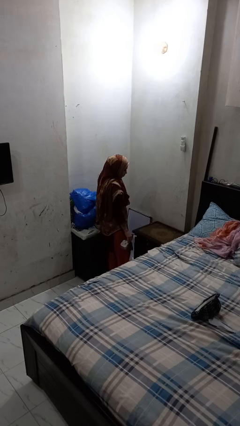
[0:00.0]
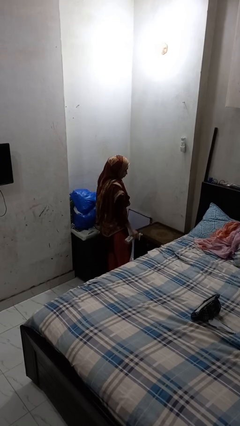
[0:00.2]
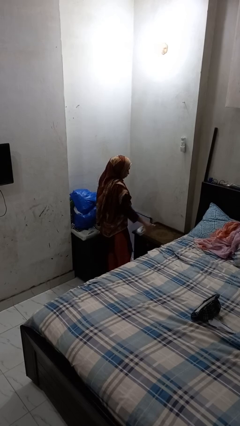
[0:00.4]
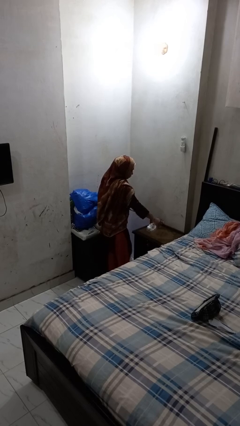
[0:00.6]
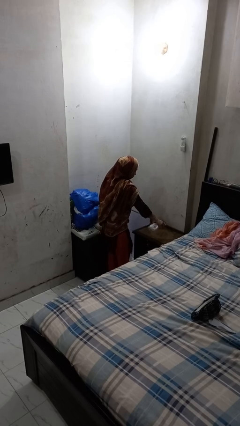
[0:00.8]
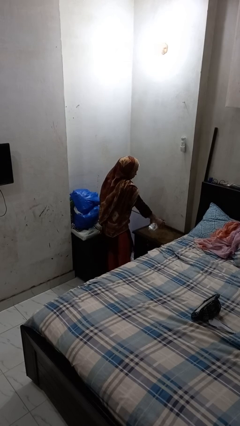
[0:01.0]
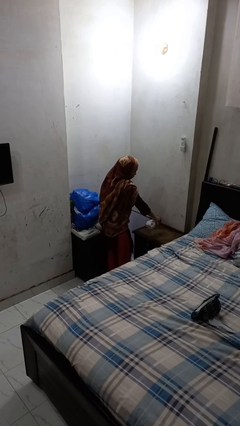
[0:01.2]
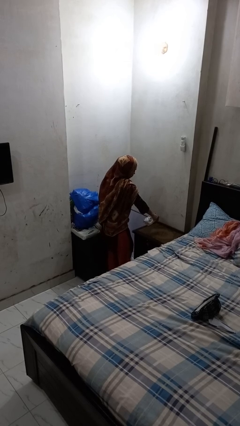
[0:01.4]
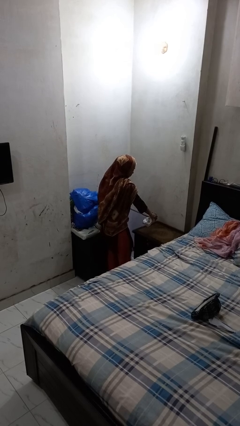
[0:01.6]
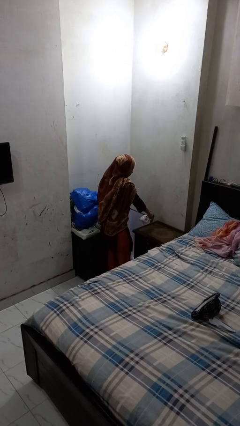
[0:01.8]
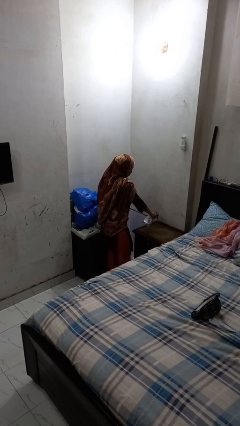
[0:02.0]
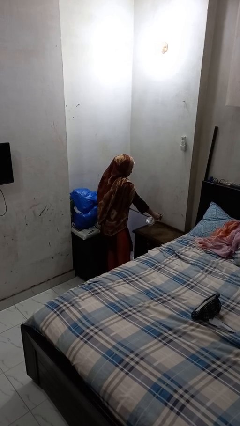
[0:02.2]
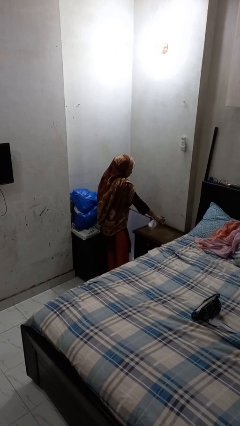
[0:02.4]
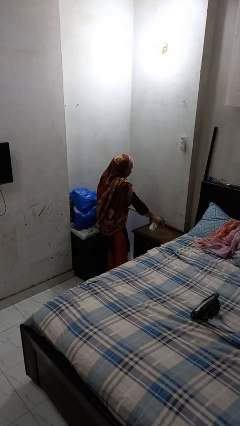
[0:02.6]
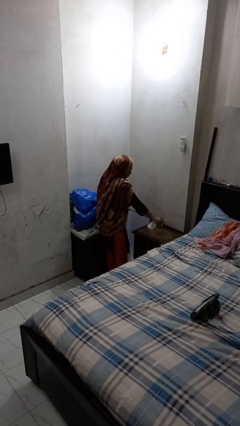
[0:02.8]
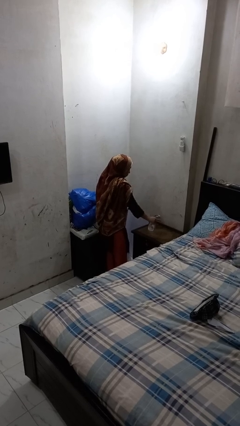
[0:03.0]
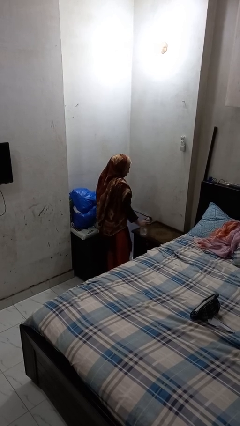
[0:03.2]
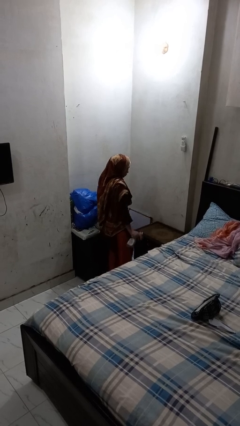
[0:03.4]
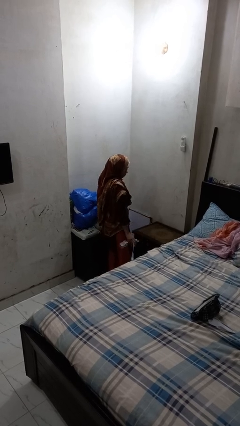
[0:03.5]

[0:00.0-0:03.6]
person sprays from bottle

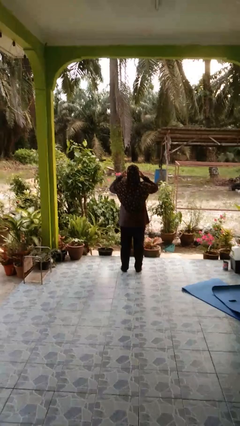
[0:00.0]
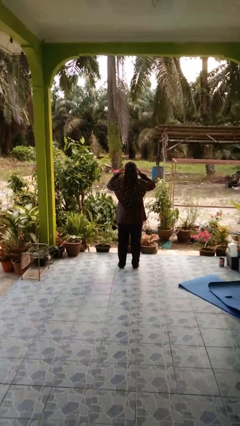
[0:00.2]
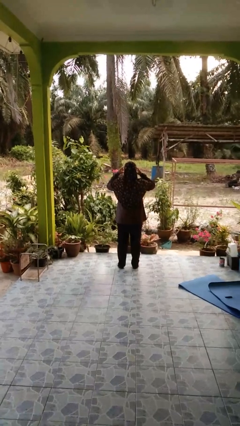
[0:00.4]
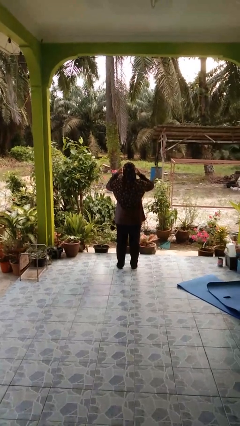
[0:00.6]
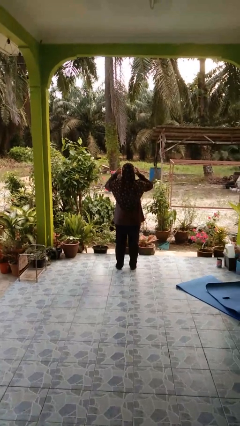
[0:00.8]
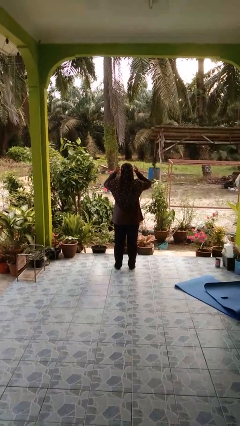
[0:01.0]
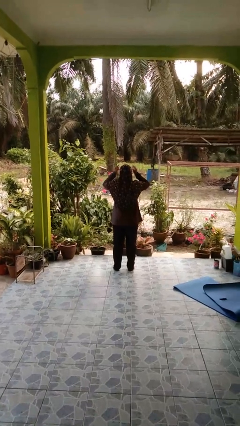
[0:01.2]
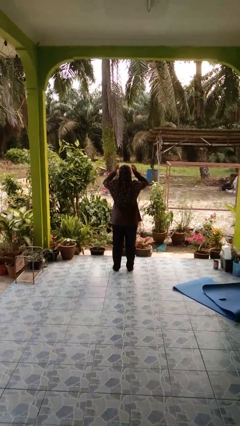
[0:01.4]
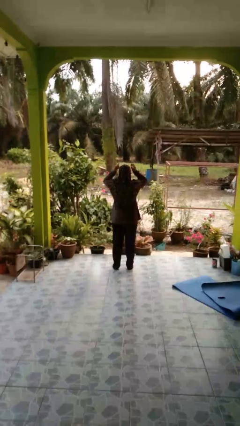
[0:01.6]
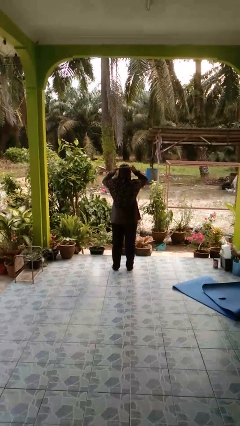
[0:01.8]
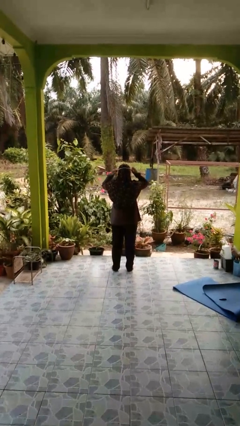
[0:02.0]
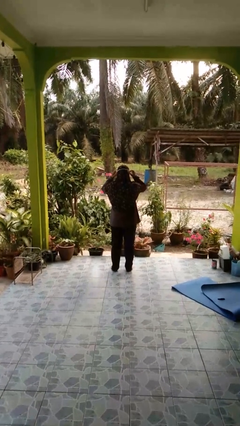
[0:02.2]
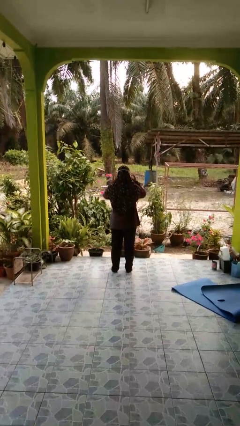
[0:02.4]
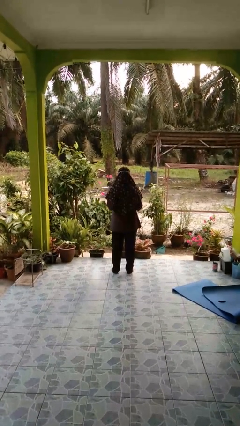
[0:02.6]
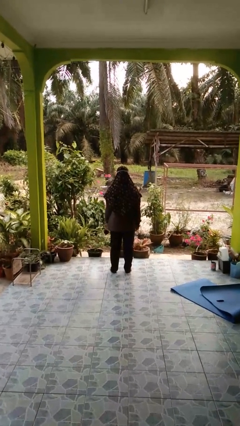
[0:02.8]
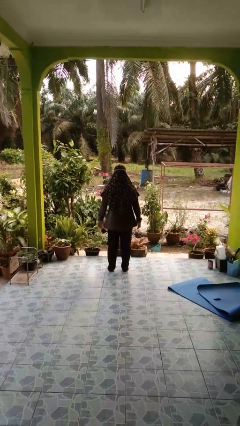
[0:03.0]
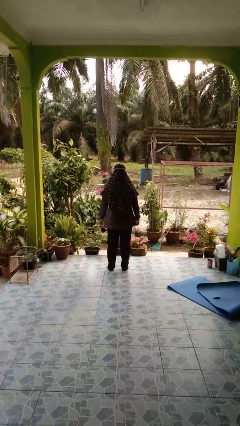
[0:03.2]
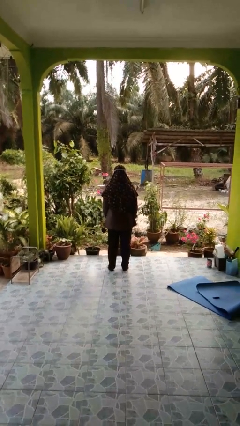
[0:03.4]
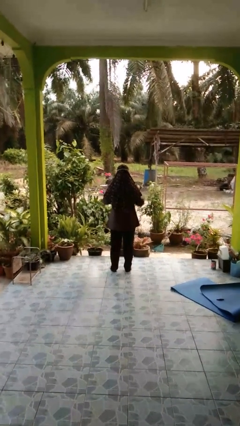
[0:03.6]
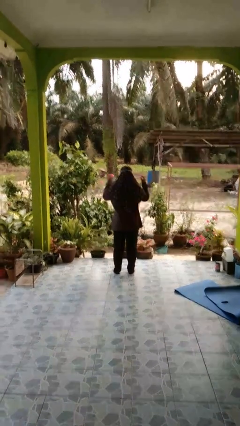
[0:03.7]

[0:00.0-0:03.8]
person puts on facemask

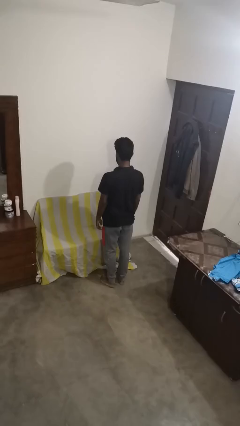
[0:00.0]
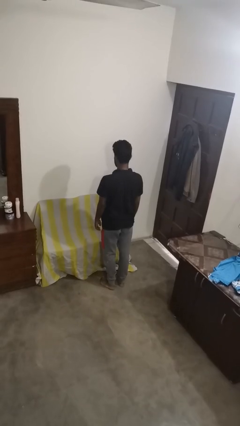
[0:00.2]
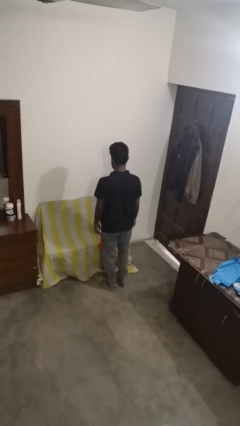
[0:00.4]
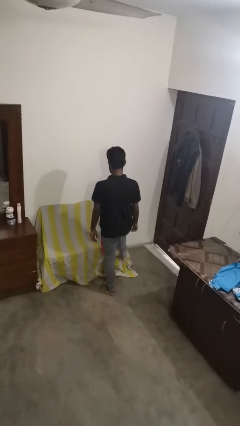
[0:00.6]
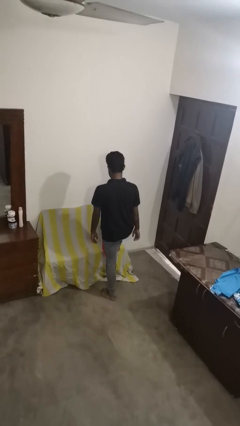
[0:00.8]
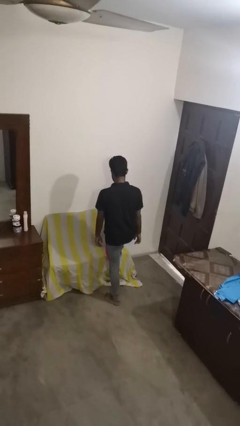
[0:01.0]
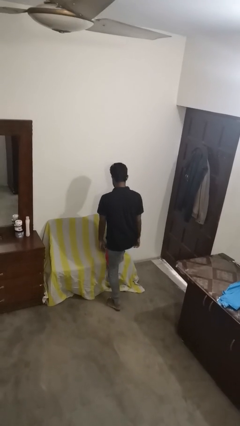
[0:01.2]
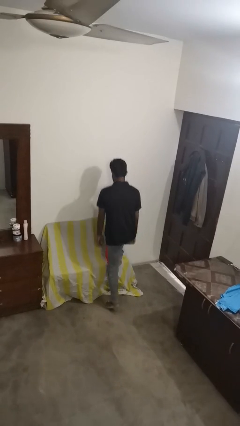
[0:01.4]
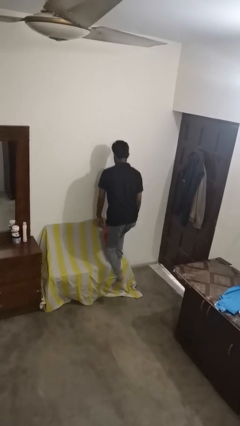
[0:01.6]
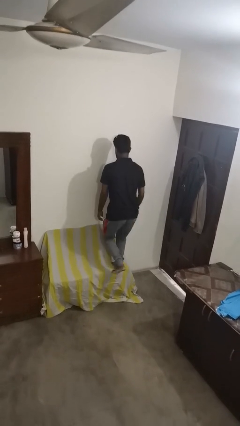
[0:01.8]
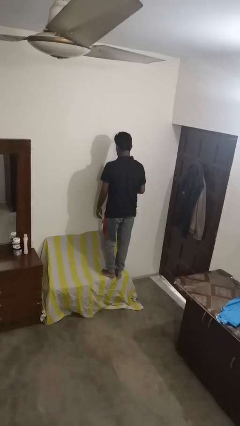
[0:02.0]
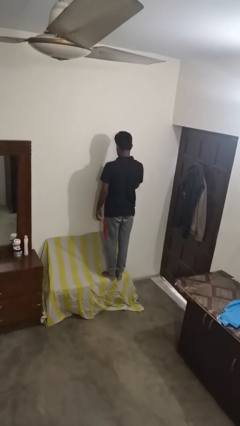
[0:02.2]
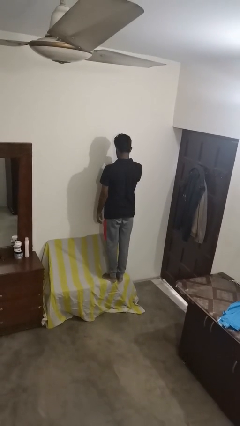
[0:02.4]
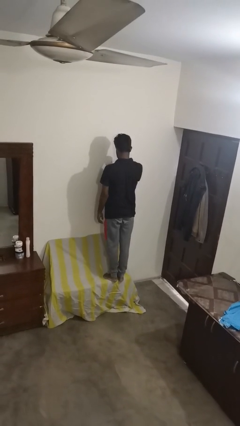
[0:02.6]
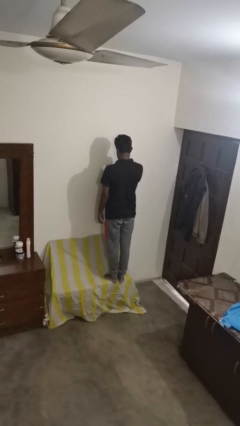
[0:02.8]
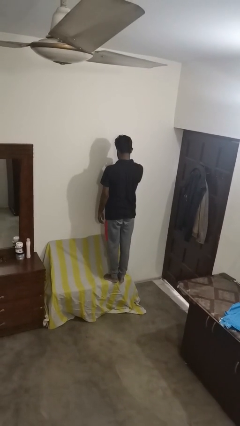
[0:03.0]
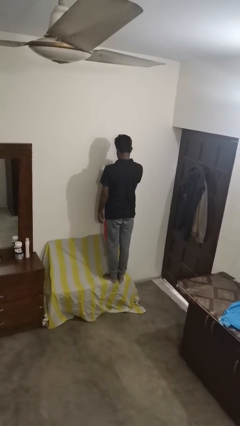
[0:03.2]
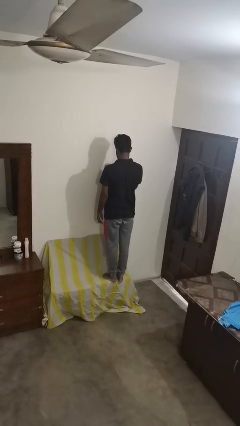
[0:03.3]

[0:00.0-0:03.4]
person climbs on couch

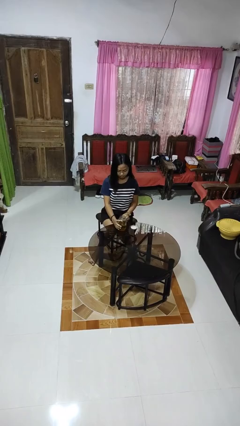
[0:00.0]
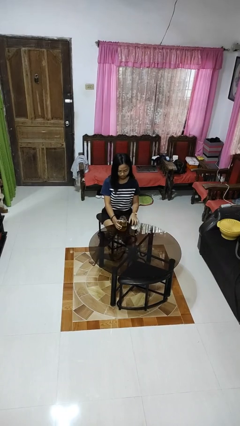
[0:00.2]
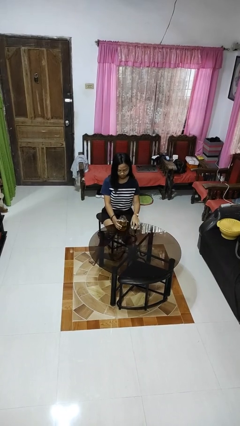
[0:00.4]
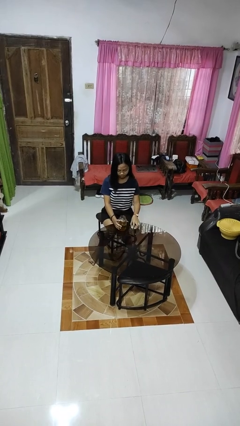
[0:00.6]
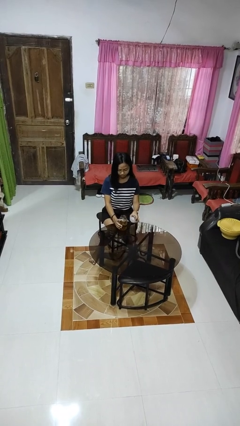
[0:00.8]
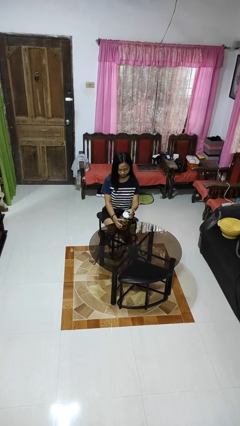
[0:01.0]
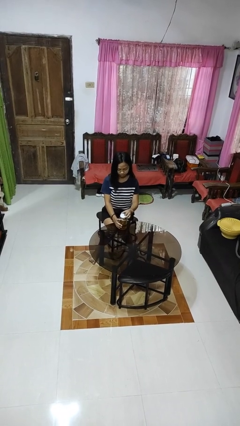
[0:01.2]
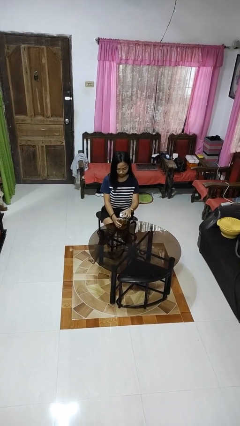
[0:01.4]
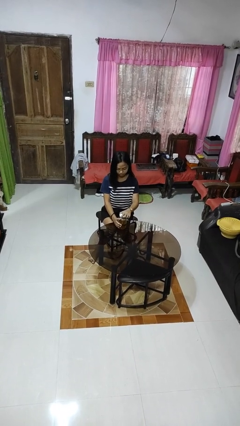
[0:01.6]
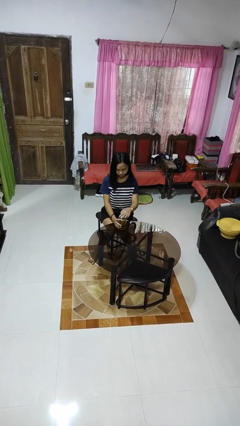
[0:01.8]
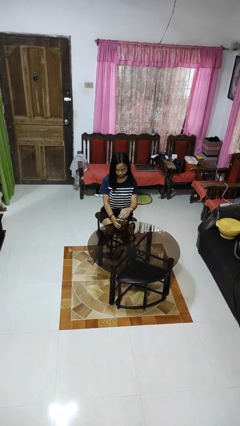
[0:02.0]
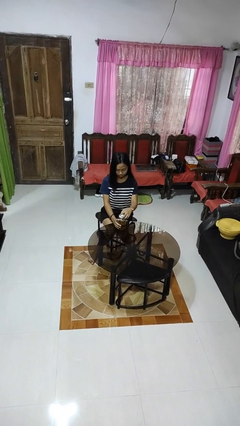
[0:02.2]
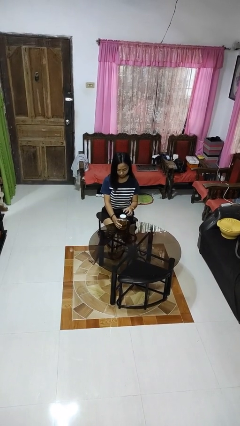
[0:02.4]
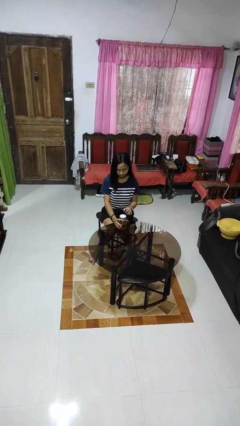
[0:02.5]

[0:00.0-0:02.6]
person closes jar

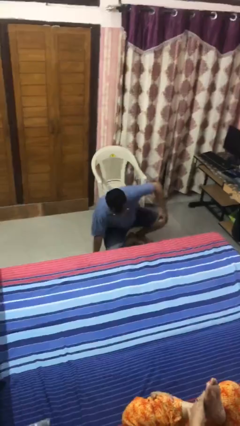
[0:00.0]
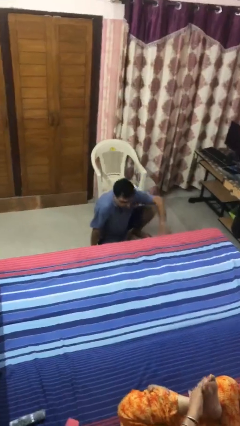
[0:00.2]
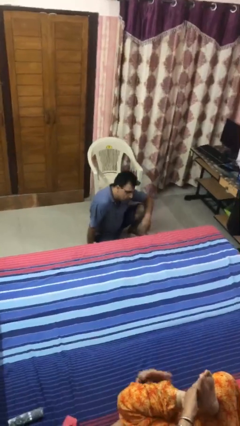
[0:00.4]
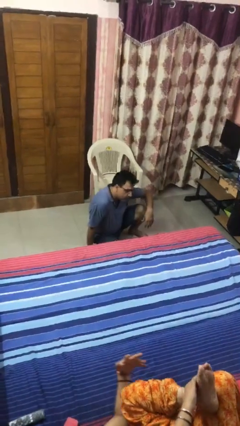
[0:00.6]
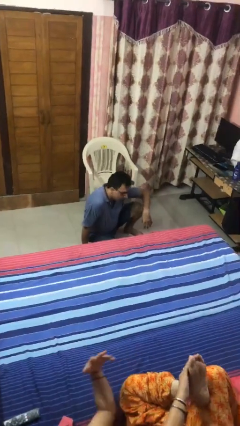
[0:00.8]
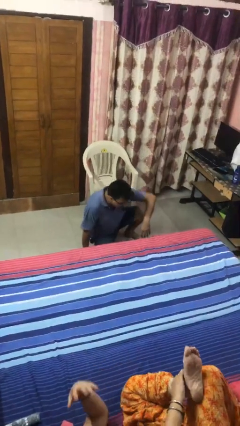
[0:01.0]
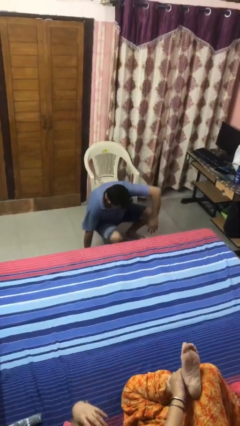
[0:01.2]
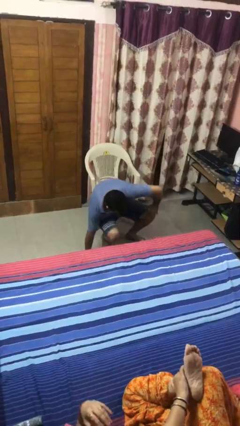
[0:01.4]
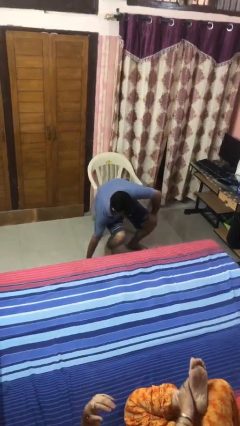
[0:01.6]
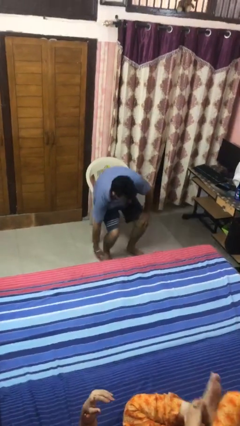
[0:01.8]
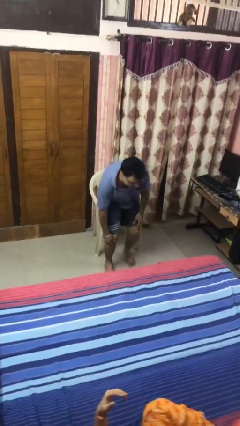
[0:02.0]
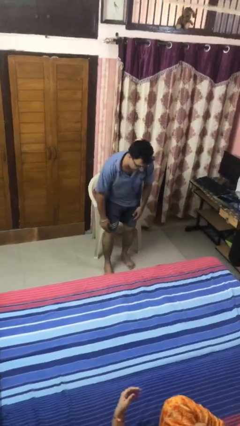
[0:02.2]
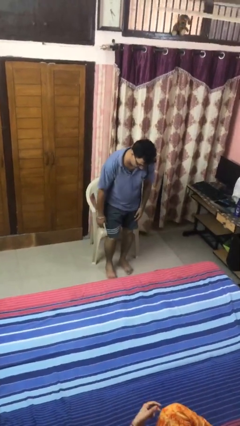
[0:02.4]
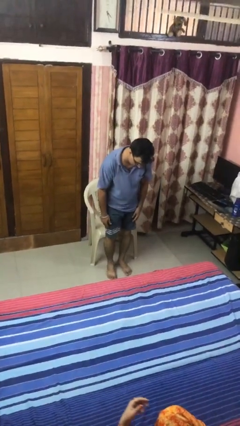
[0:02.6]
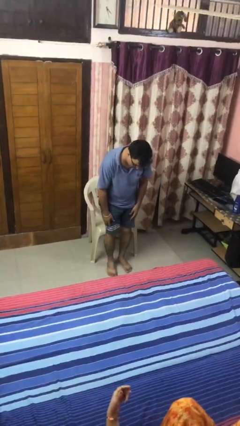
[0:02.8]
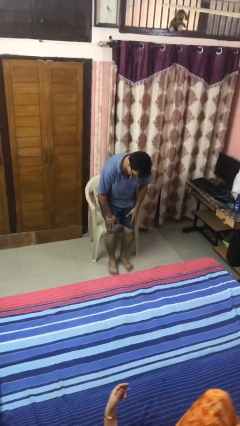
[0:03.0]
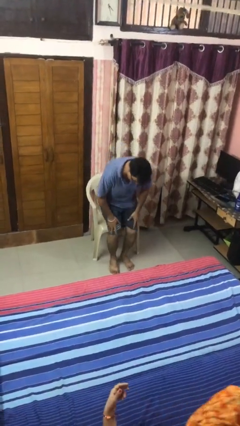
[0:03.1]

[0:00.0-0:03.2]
person stands up from floor

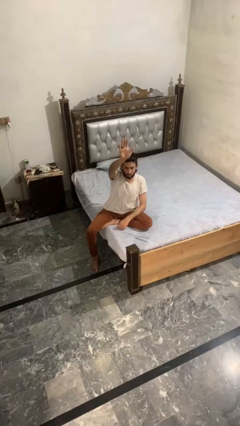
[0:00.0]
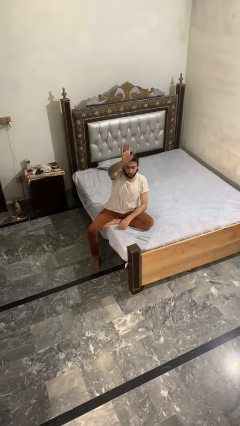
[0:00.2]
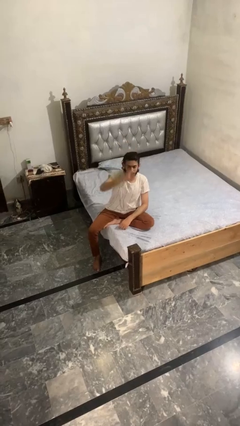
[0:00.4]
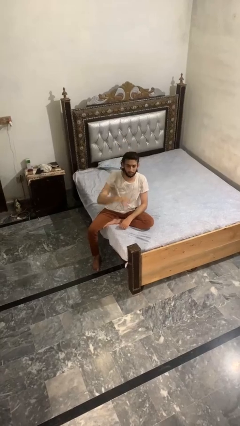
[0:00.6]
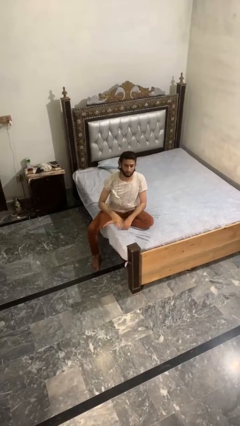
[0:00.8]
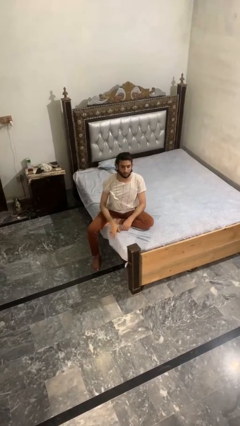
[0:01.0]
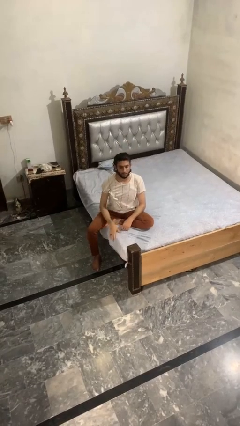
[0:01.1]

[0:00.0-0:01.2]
person gestures lower hand
